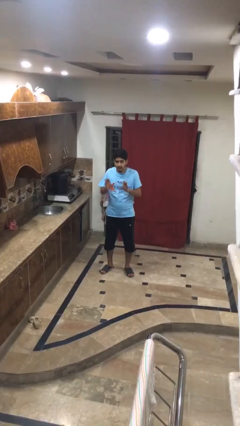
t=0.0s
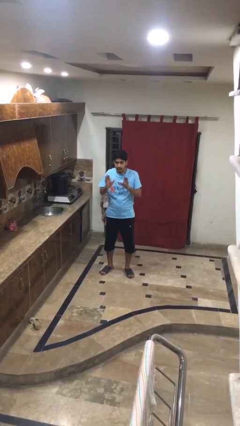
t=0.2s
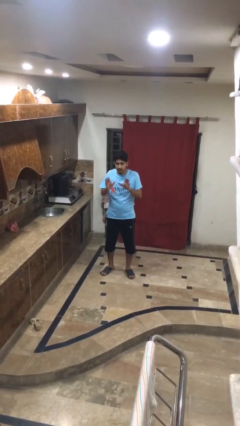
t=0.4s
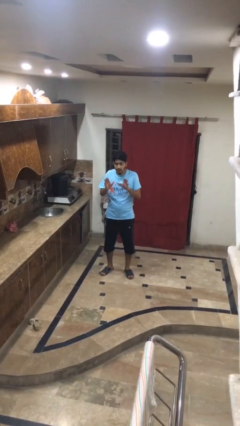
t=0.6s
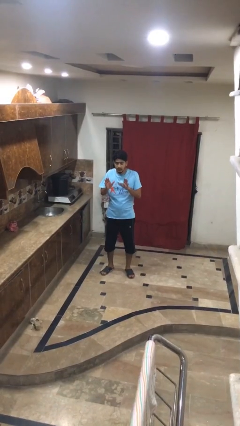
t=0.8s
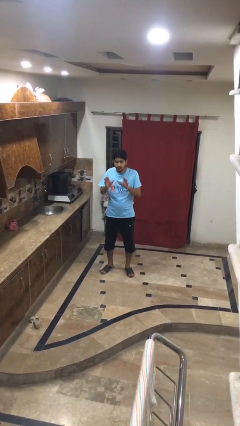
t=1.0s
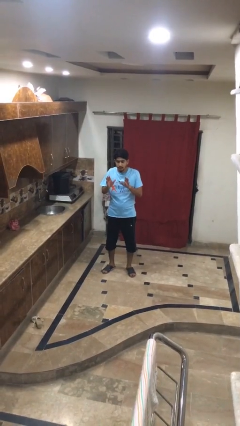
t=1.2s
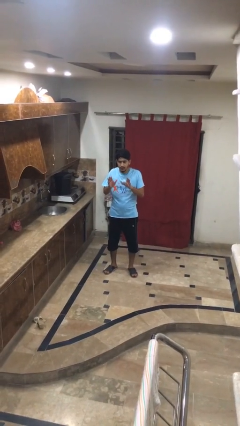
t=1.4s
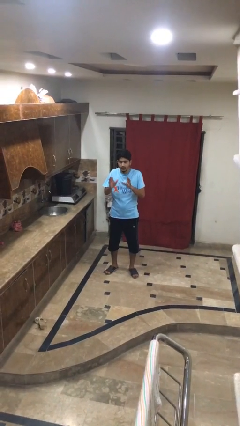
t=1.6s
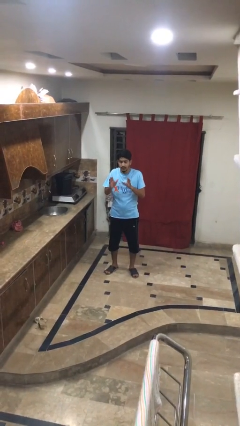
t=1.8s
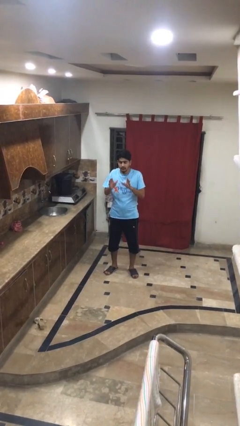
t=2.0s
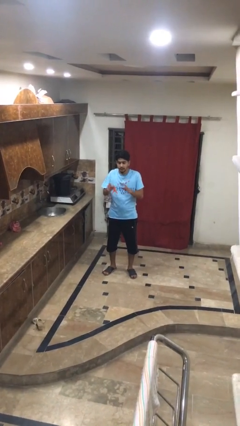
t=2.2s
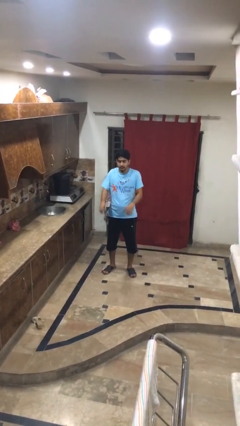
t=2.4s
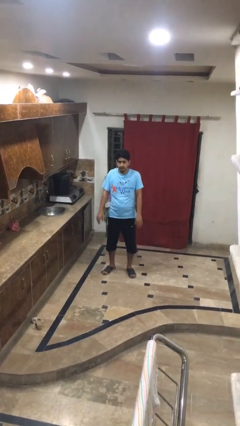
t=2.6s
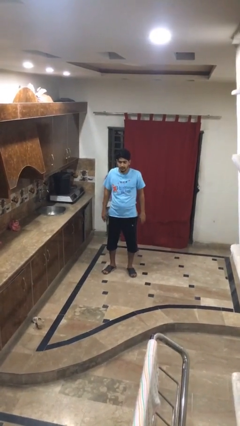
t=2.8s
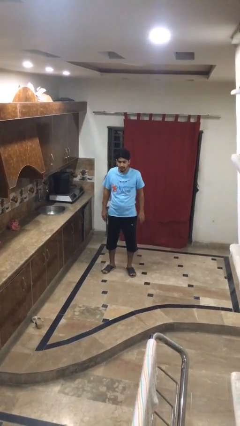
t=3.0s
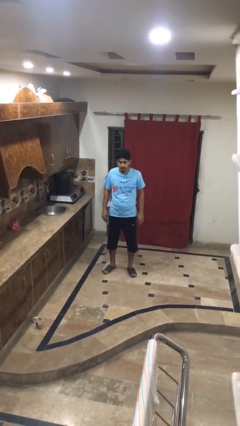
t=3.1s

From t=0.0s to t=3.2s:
person shrugs

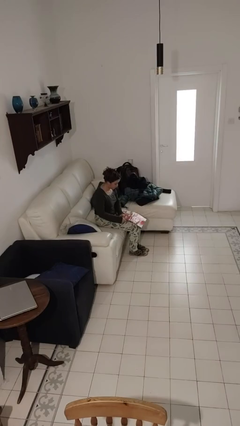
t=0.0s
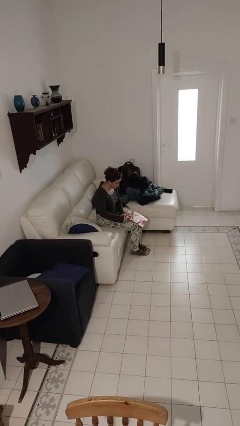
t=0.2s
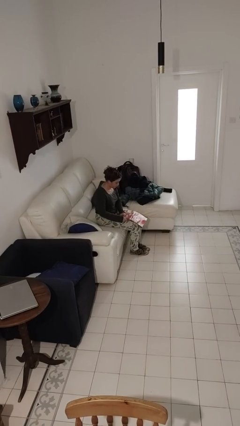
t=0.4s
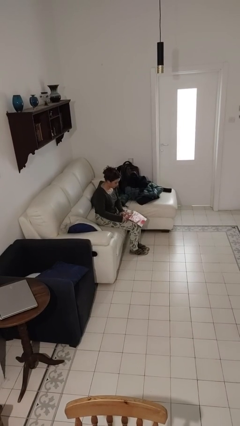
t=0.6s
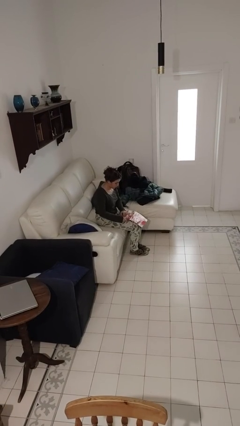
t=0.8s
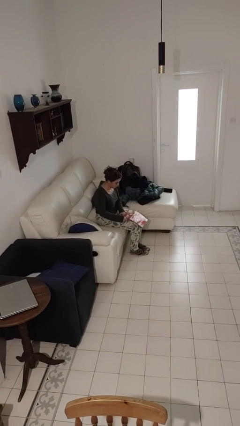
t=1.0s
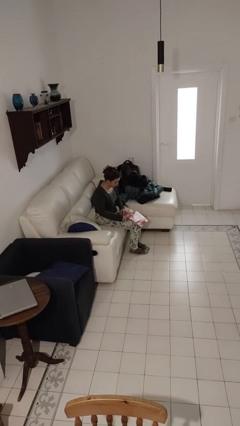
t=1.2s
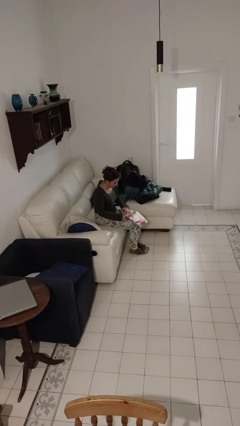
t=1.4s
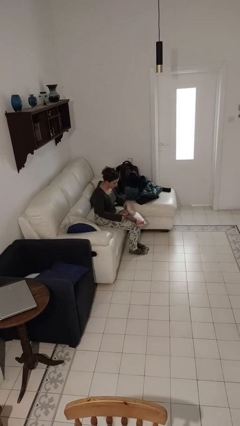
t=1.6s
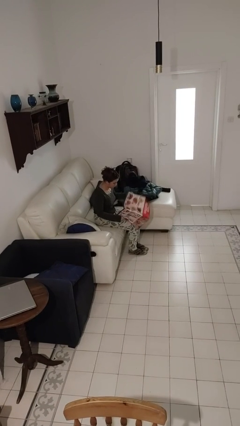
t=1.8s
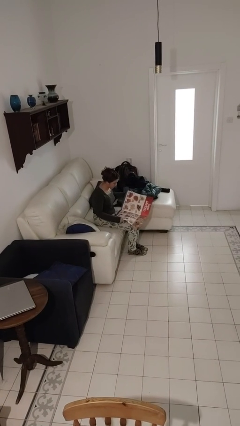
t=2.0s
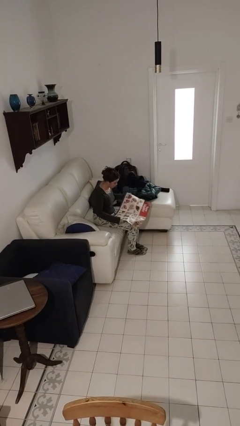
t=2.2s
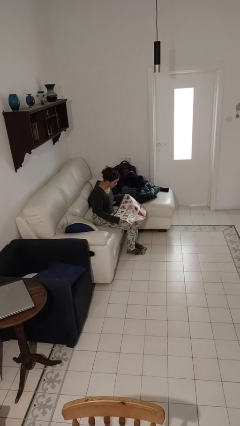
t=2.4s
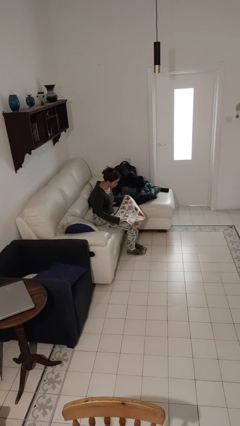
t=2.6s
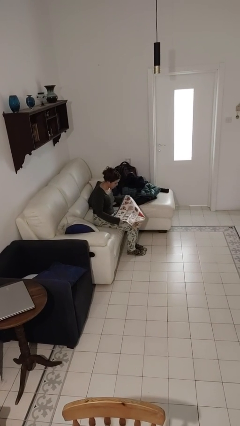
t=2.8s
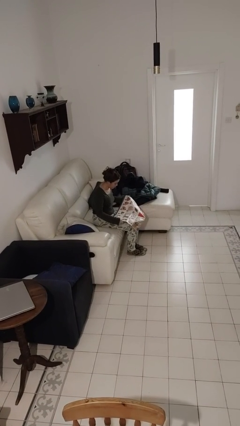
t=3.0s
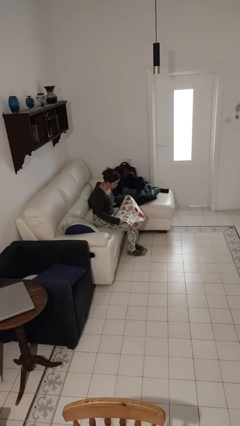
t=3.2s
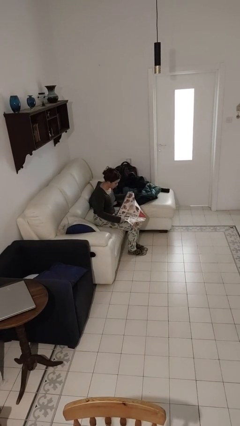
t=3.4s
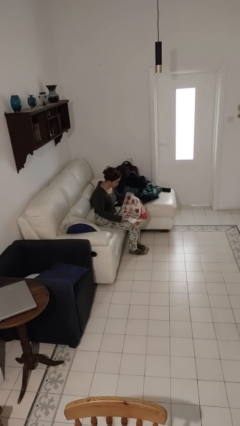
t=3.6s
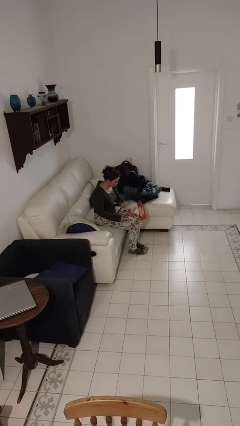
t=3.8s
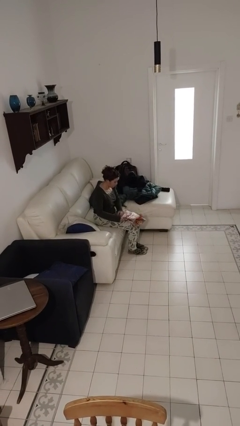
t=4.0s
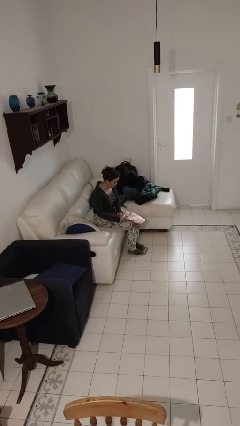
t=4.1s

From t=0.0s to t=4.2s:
person reads newspaper

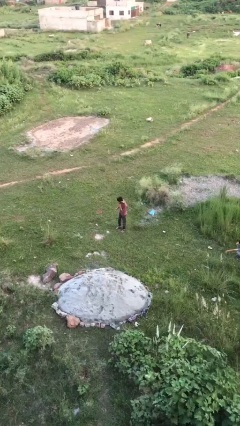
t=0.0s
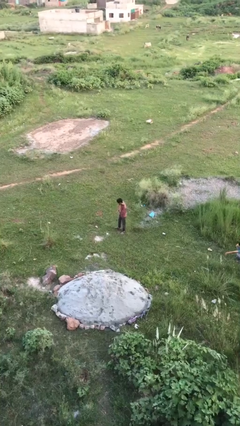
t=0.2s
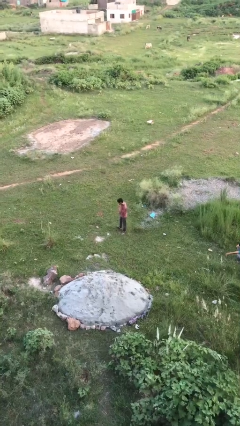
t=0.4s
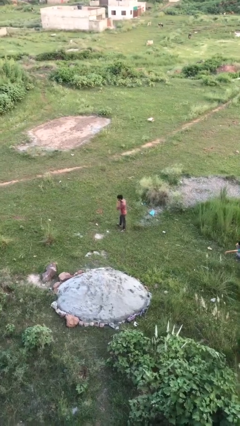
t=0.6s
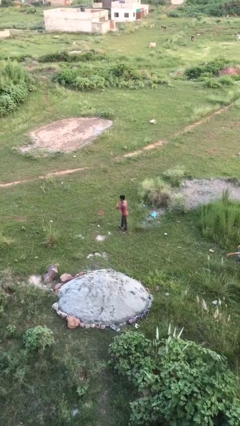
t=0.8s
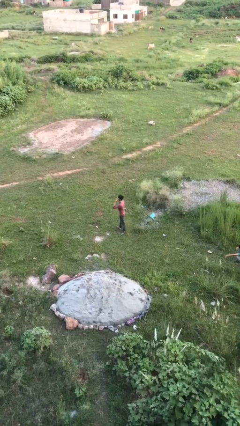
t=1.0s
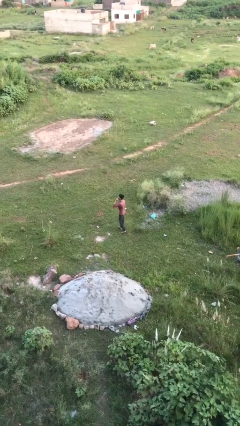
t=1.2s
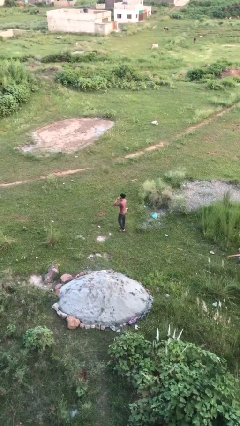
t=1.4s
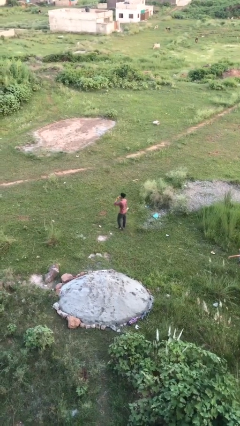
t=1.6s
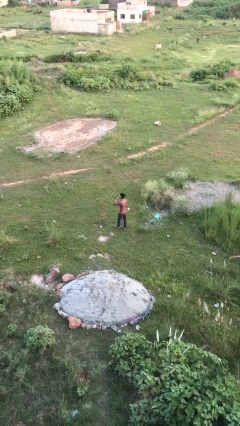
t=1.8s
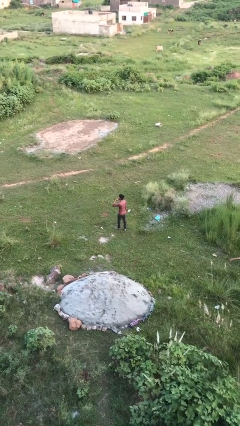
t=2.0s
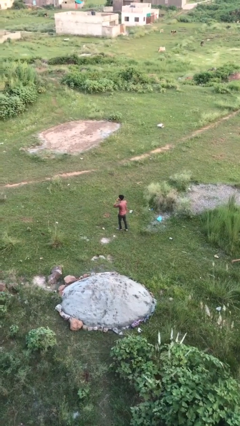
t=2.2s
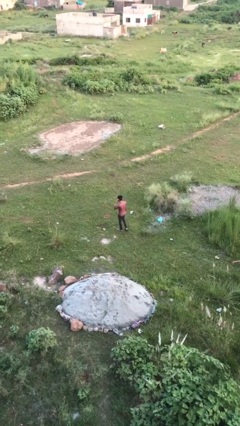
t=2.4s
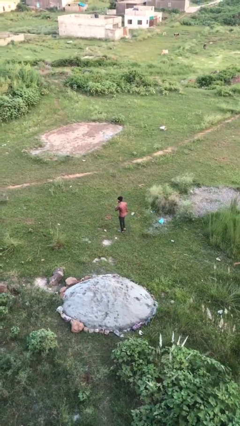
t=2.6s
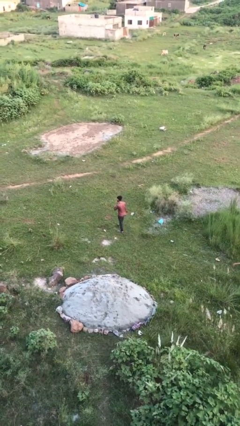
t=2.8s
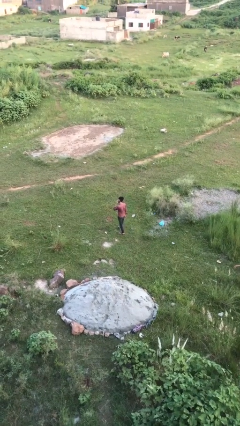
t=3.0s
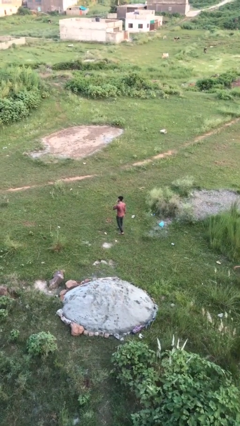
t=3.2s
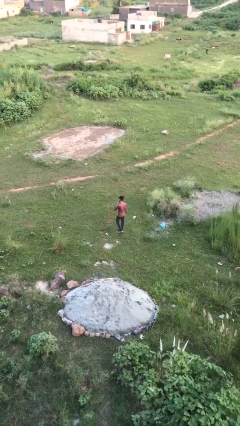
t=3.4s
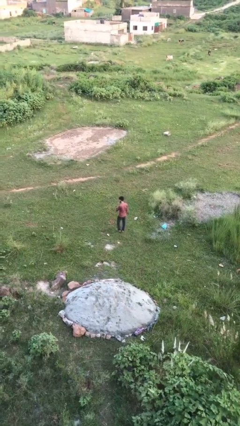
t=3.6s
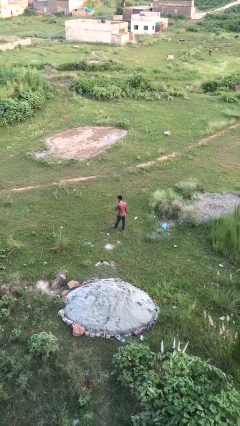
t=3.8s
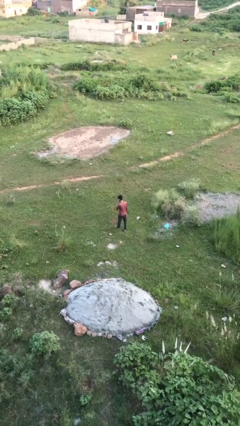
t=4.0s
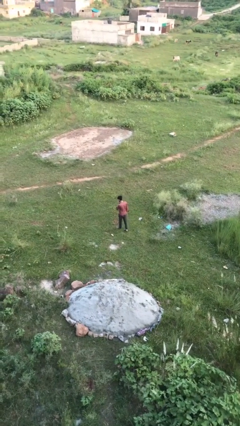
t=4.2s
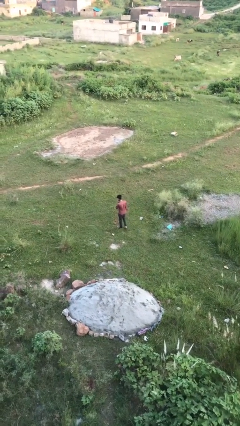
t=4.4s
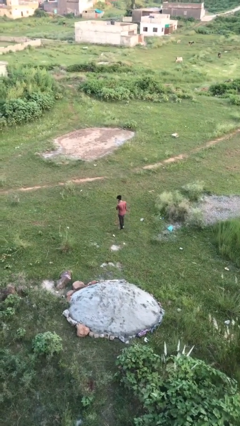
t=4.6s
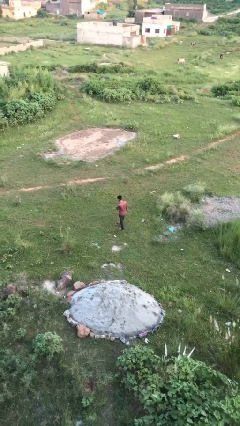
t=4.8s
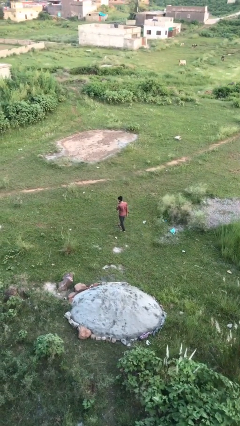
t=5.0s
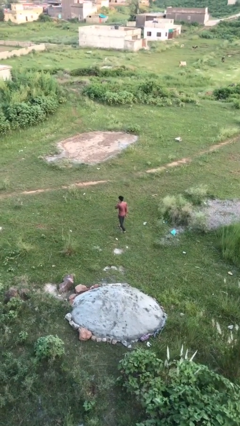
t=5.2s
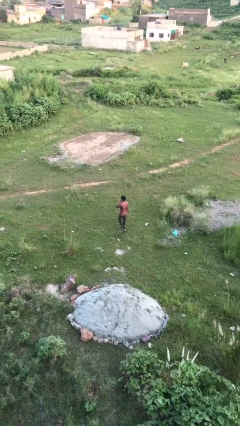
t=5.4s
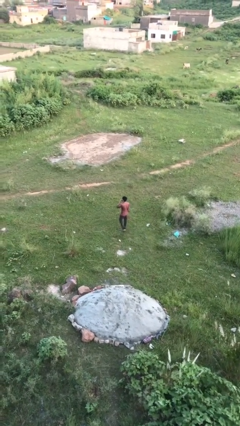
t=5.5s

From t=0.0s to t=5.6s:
person talks on phone

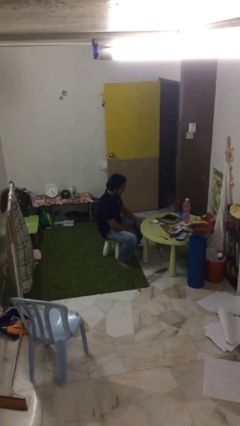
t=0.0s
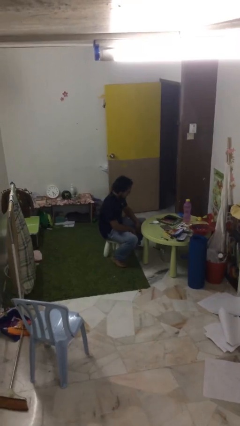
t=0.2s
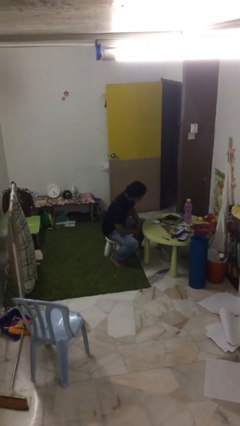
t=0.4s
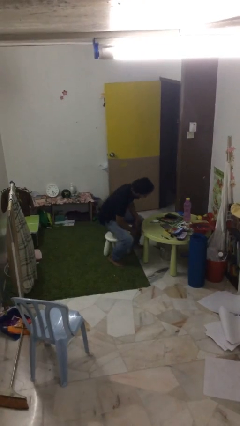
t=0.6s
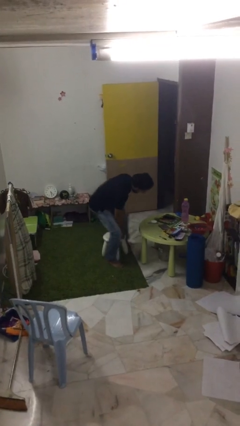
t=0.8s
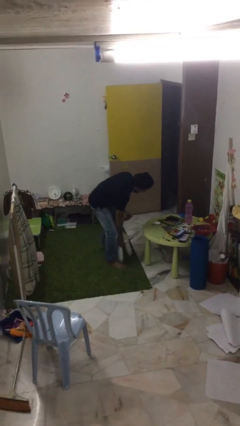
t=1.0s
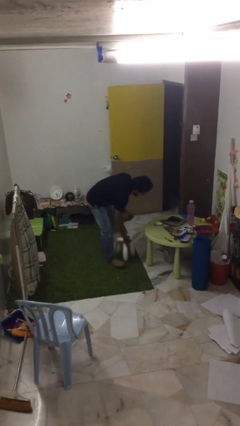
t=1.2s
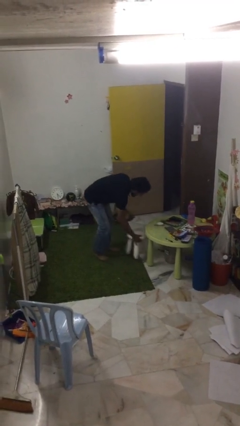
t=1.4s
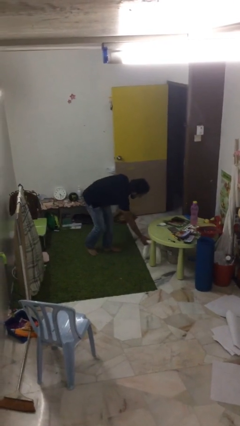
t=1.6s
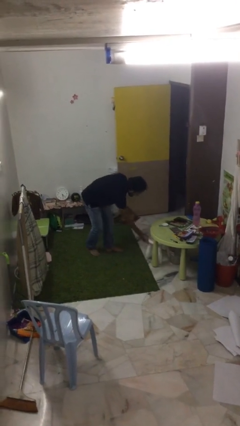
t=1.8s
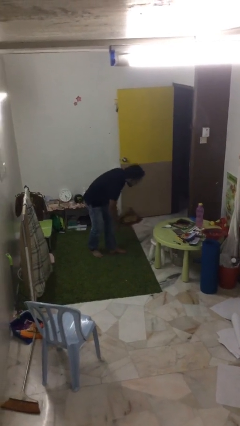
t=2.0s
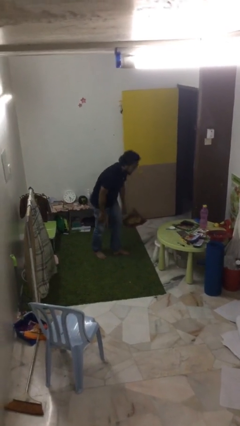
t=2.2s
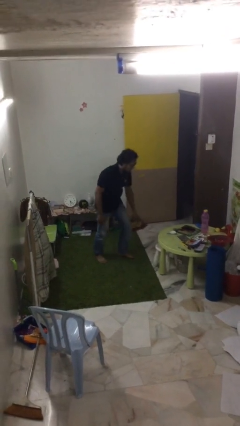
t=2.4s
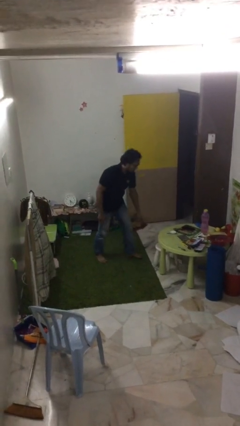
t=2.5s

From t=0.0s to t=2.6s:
person stands up

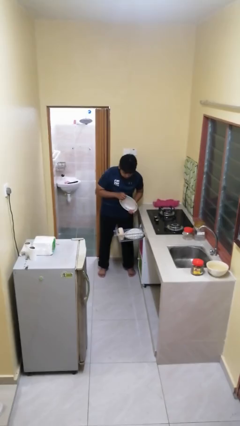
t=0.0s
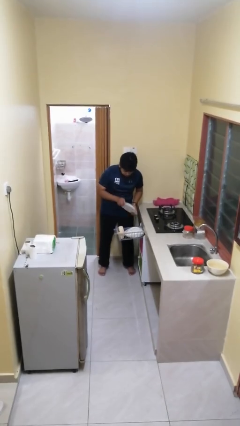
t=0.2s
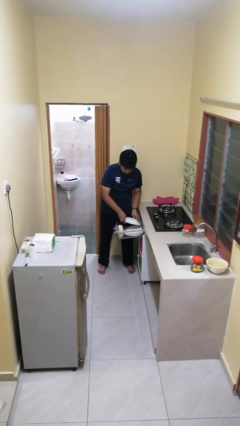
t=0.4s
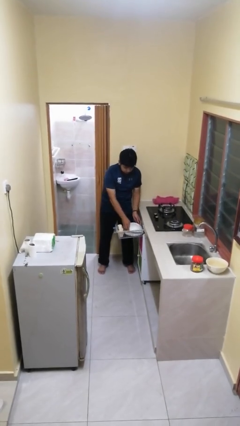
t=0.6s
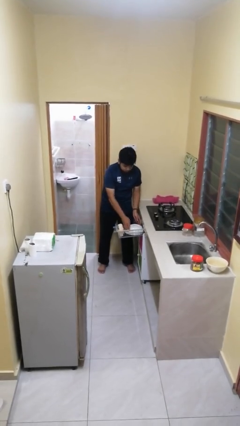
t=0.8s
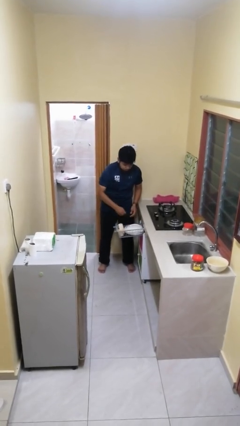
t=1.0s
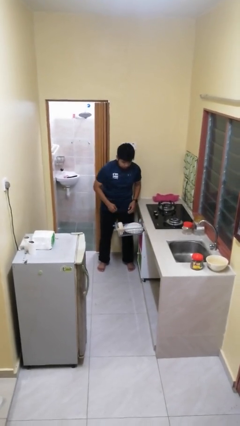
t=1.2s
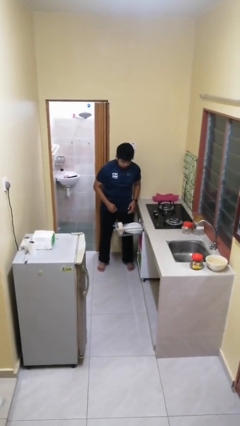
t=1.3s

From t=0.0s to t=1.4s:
person puts object into kitchen drawer

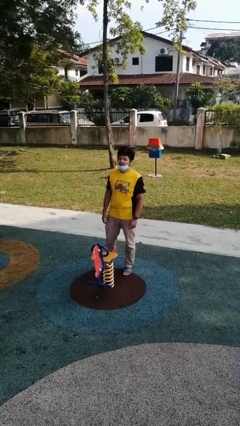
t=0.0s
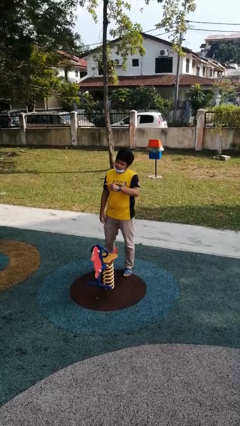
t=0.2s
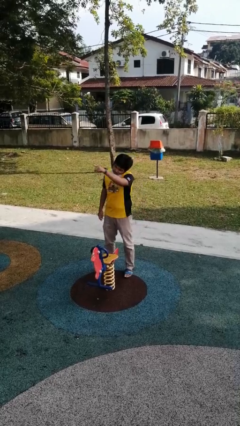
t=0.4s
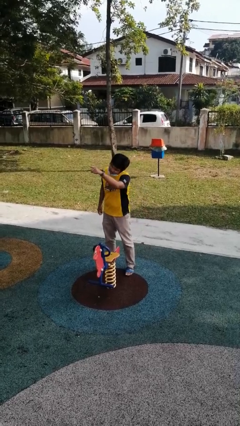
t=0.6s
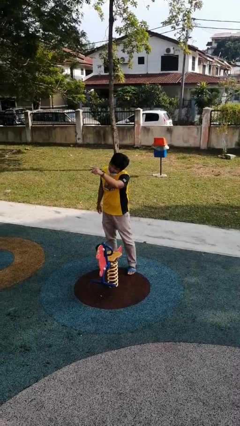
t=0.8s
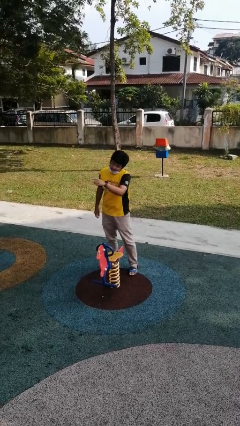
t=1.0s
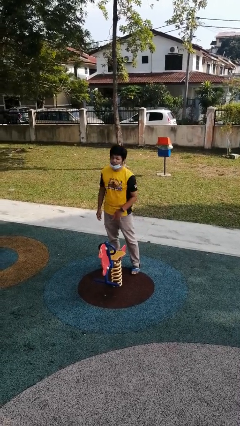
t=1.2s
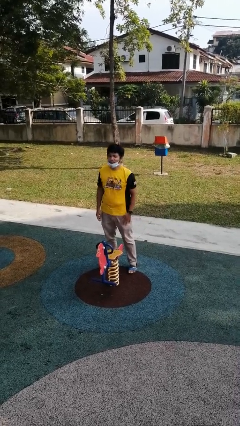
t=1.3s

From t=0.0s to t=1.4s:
person points at person
